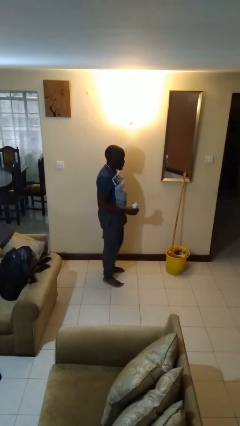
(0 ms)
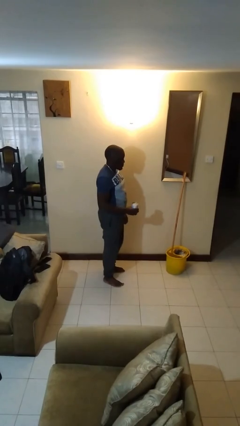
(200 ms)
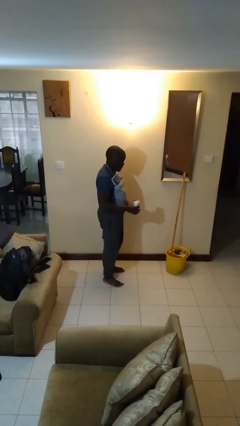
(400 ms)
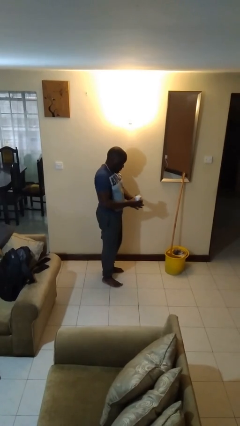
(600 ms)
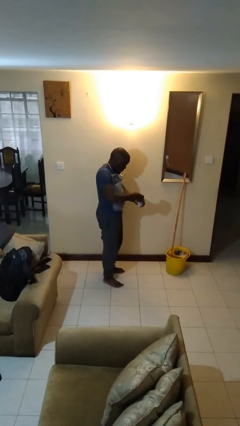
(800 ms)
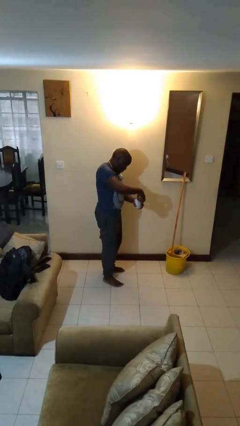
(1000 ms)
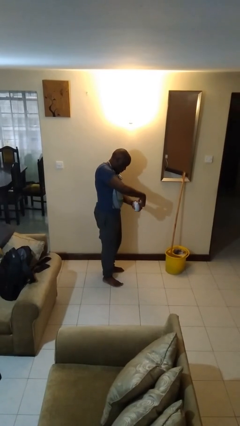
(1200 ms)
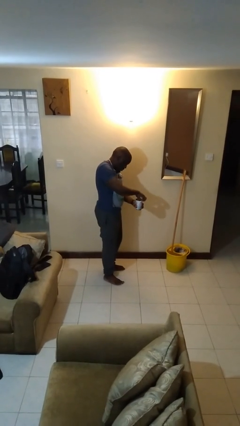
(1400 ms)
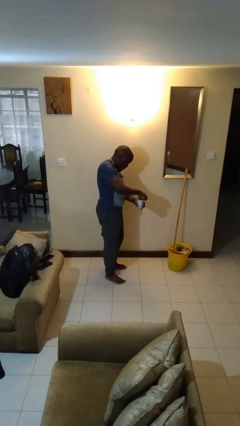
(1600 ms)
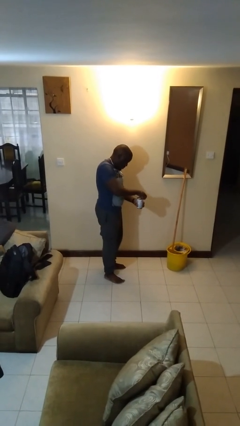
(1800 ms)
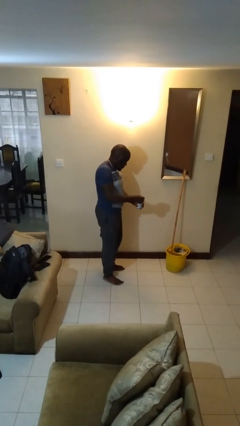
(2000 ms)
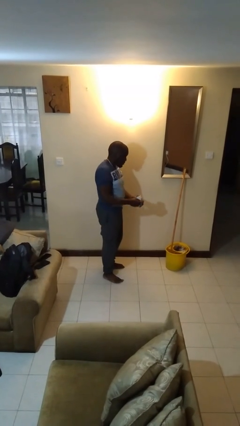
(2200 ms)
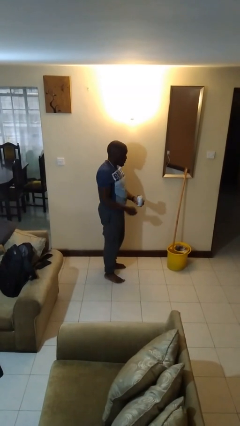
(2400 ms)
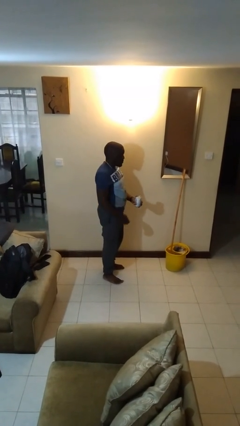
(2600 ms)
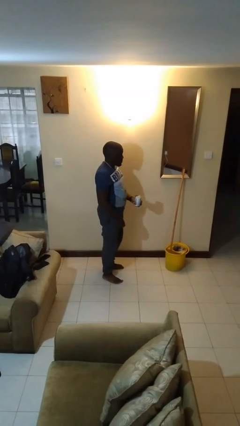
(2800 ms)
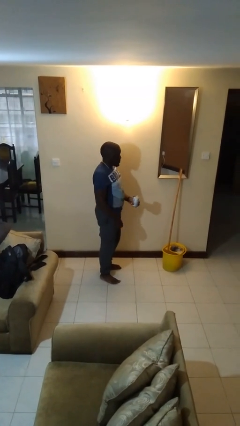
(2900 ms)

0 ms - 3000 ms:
person opens beverage can

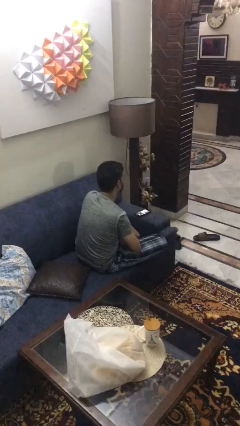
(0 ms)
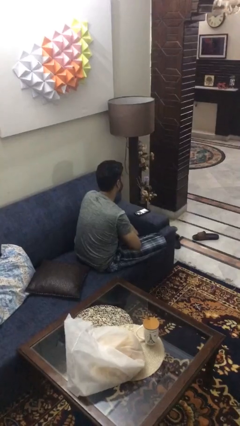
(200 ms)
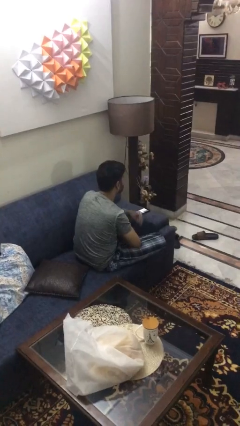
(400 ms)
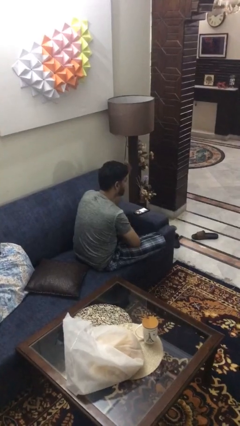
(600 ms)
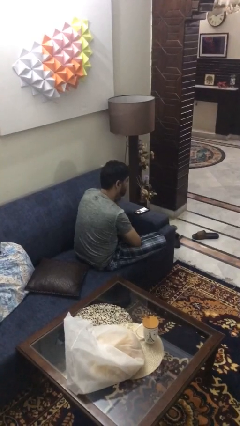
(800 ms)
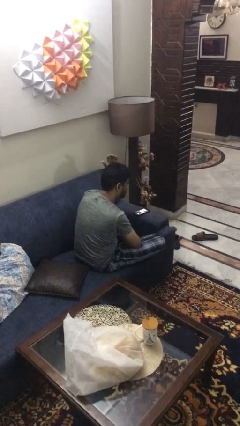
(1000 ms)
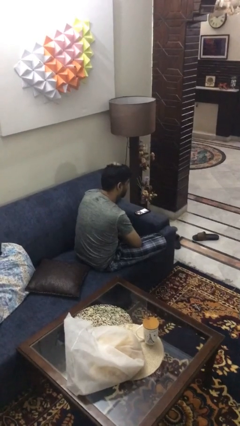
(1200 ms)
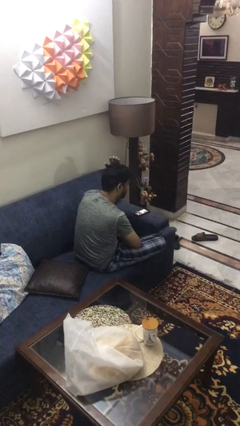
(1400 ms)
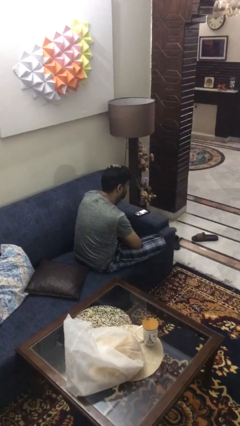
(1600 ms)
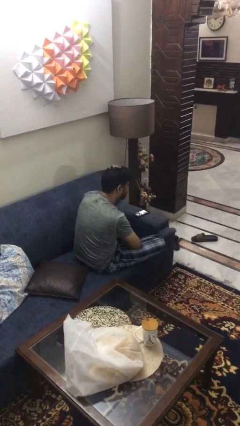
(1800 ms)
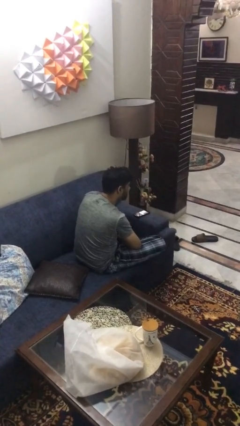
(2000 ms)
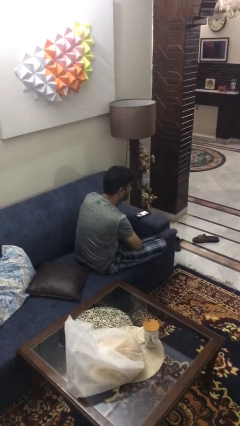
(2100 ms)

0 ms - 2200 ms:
person strokes hair

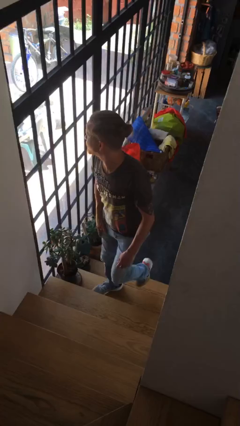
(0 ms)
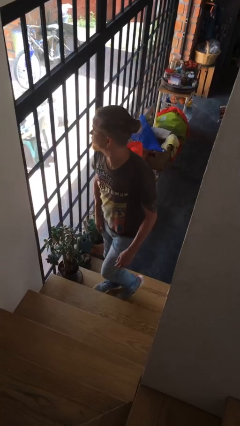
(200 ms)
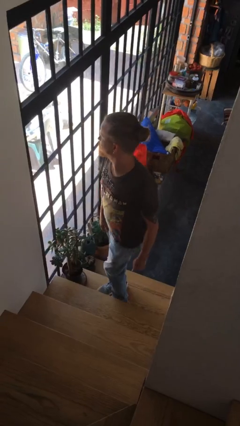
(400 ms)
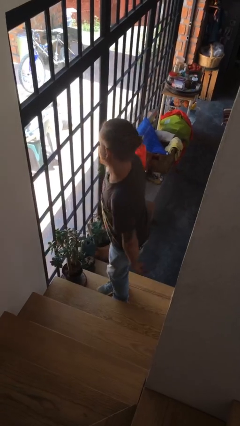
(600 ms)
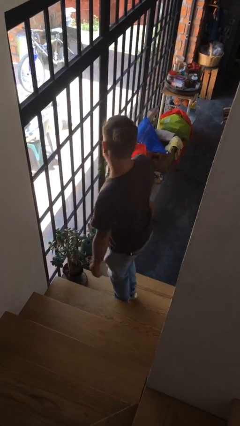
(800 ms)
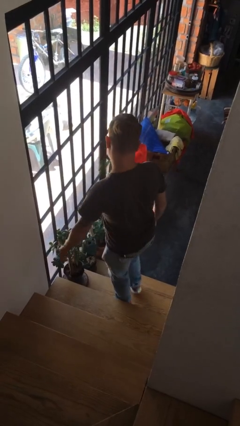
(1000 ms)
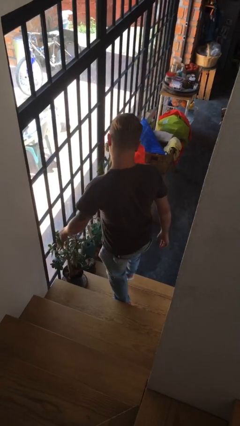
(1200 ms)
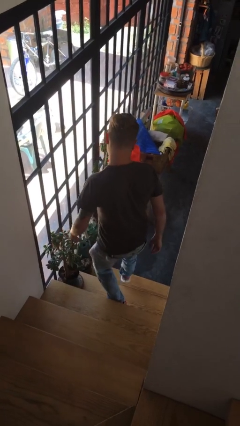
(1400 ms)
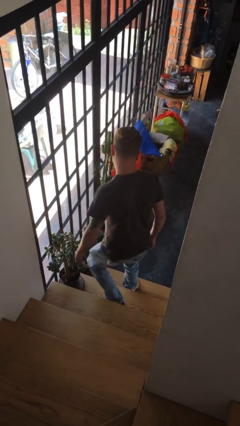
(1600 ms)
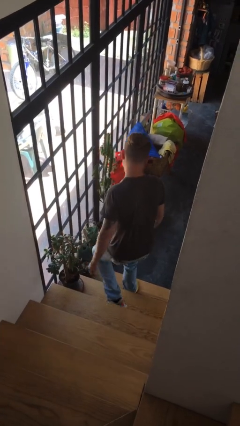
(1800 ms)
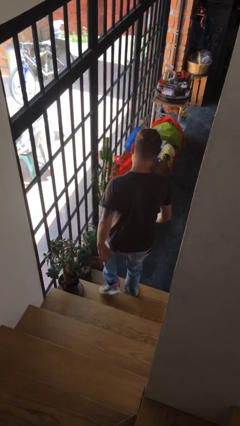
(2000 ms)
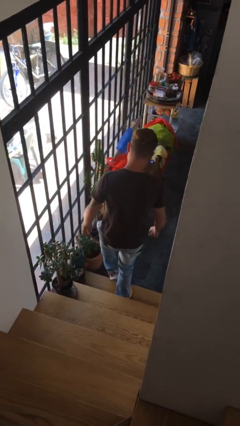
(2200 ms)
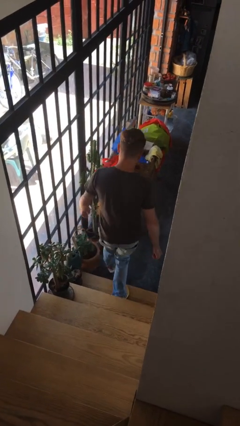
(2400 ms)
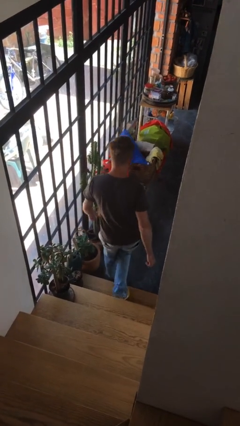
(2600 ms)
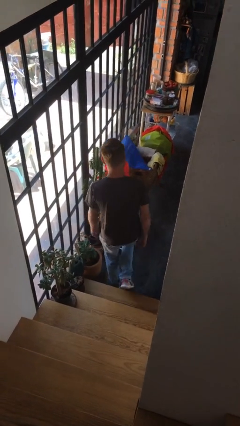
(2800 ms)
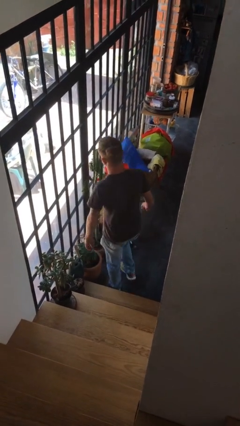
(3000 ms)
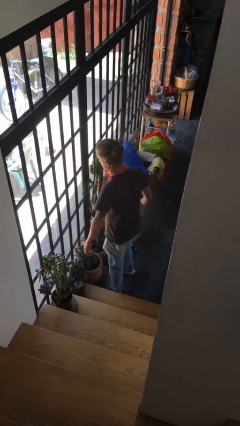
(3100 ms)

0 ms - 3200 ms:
person climbs down stairs

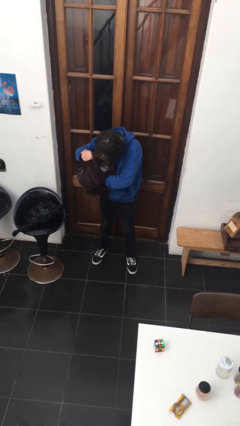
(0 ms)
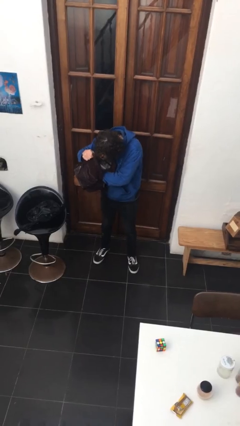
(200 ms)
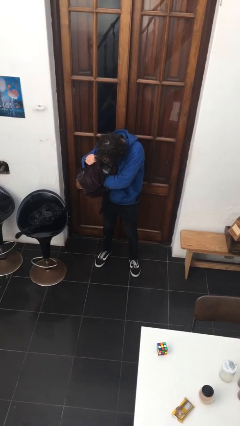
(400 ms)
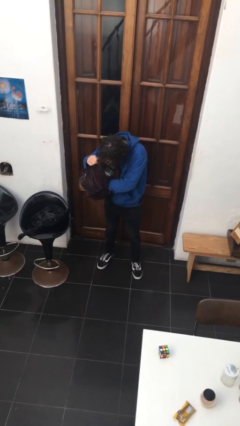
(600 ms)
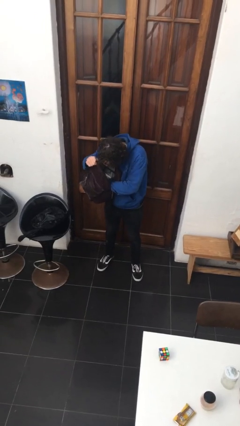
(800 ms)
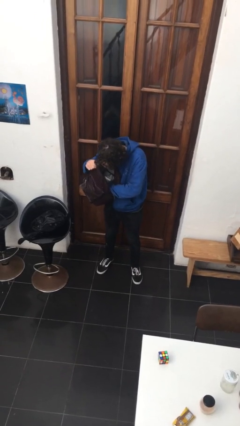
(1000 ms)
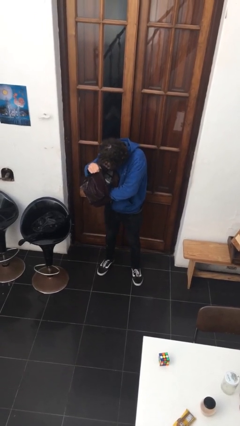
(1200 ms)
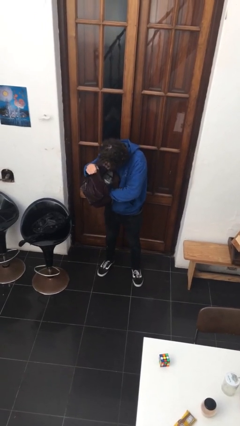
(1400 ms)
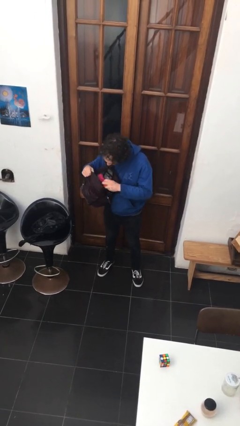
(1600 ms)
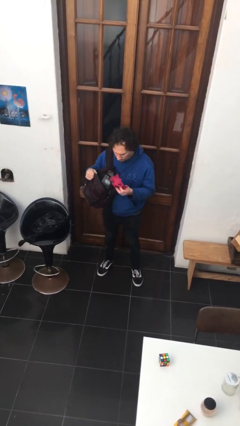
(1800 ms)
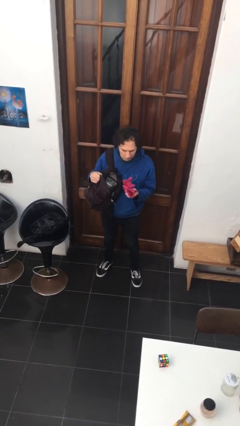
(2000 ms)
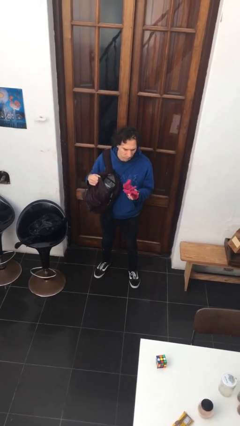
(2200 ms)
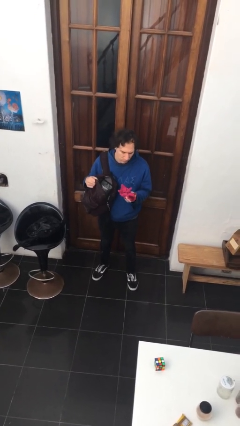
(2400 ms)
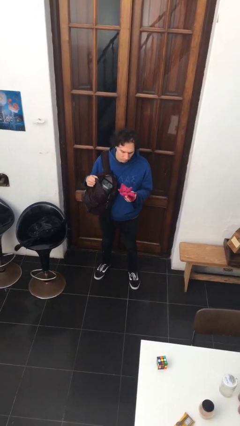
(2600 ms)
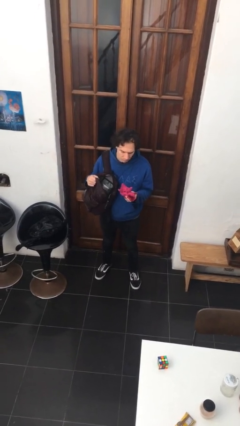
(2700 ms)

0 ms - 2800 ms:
person takes object from backpack

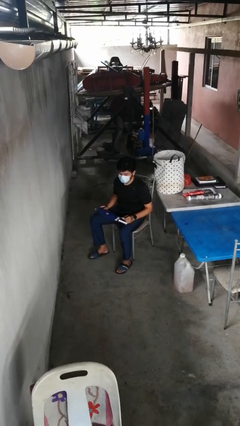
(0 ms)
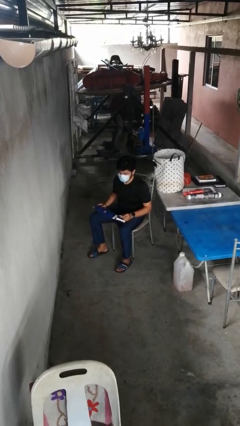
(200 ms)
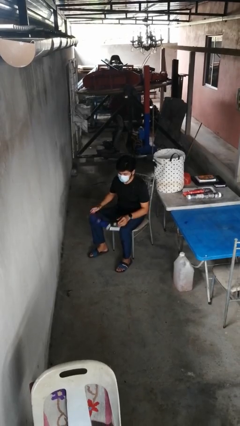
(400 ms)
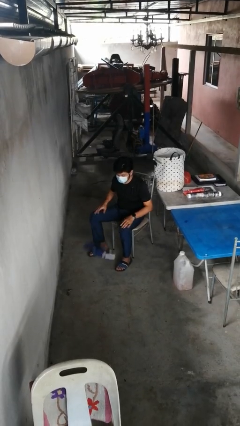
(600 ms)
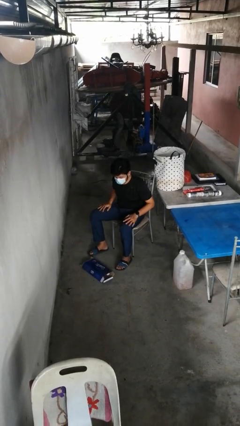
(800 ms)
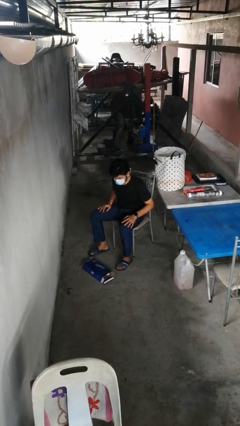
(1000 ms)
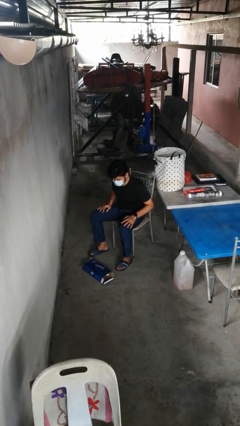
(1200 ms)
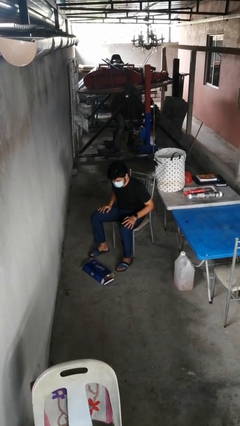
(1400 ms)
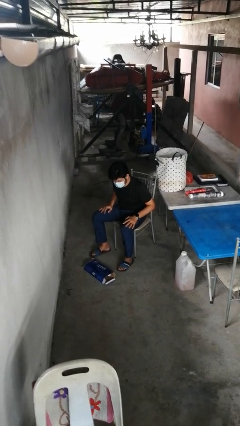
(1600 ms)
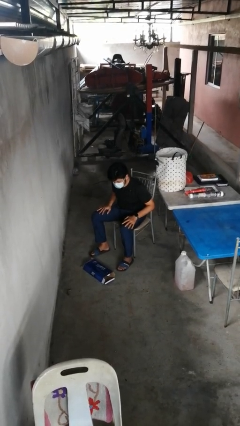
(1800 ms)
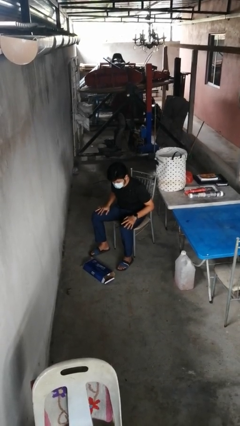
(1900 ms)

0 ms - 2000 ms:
person drops object

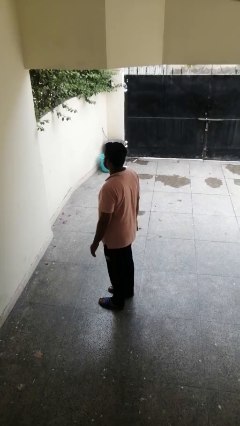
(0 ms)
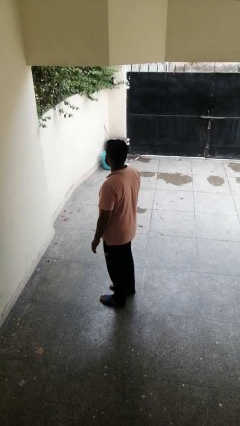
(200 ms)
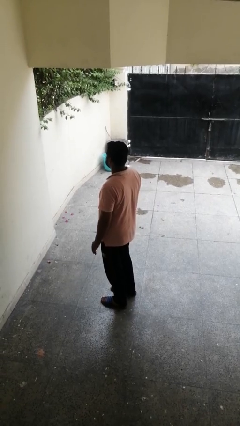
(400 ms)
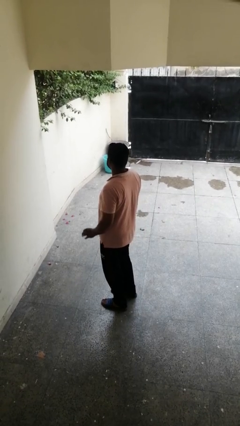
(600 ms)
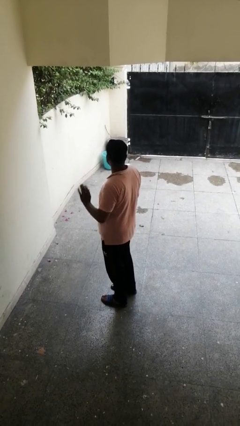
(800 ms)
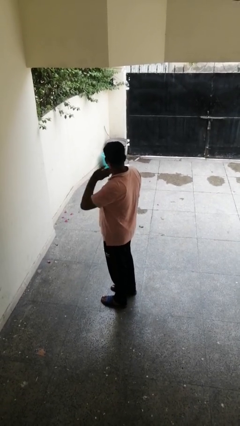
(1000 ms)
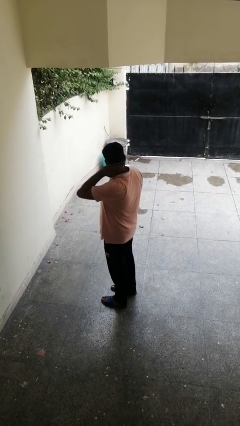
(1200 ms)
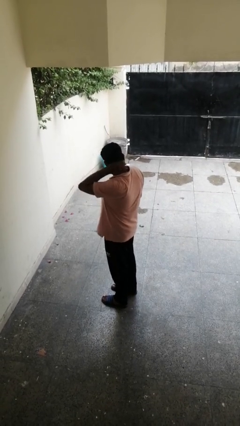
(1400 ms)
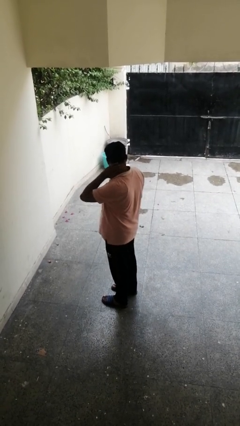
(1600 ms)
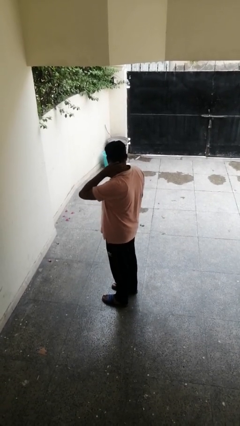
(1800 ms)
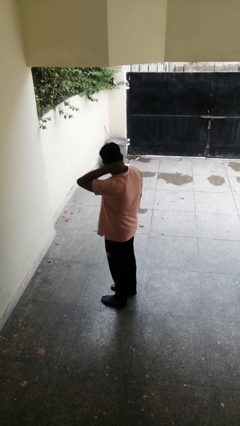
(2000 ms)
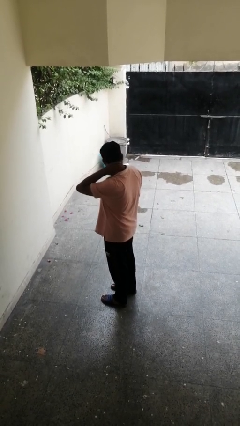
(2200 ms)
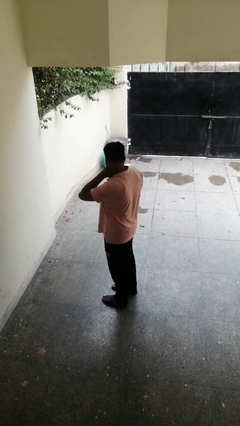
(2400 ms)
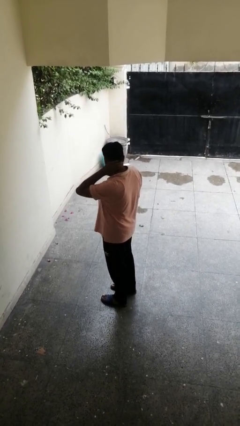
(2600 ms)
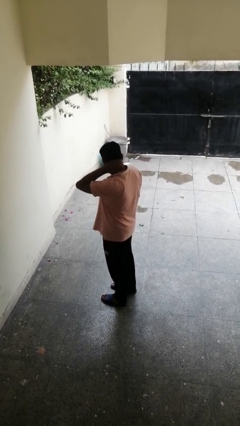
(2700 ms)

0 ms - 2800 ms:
person rubs neck

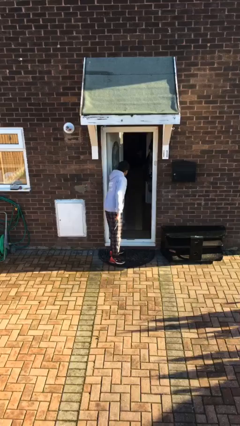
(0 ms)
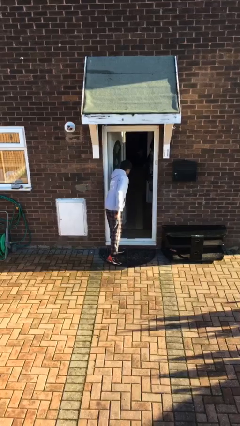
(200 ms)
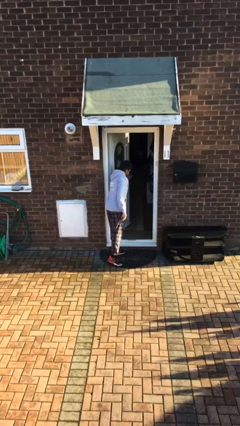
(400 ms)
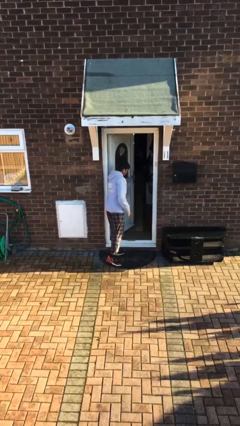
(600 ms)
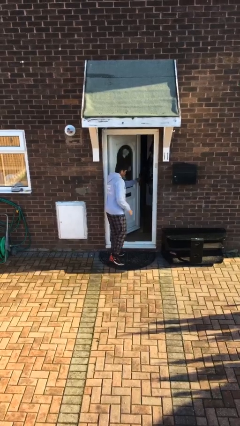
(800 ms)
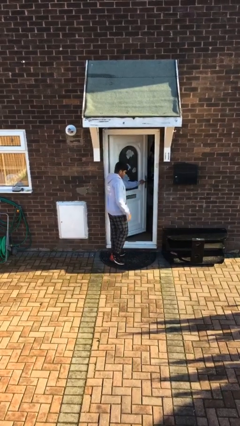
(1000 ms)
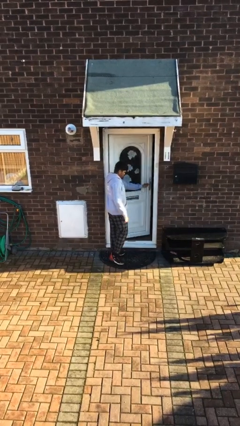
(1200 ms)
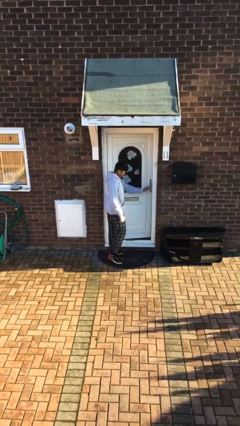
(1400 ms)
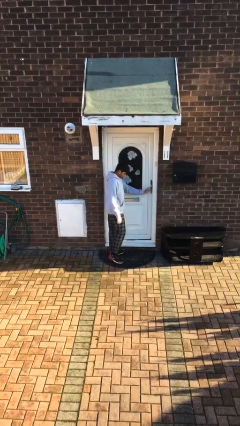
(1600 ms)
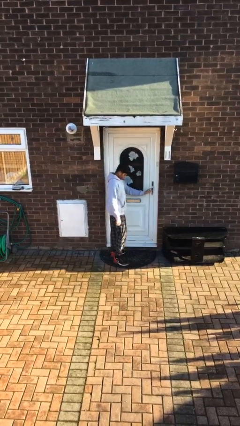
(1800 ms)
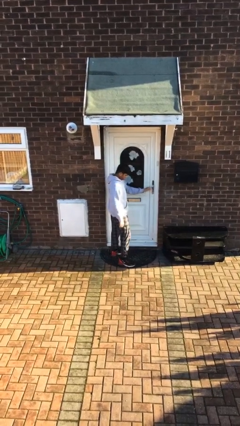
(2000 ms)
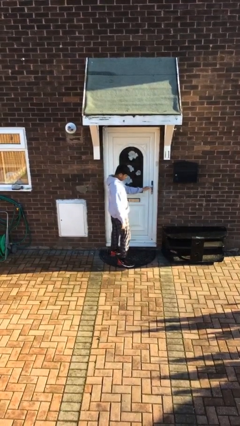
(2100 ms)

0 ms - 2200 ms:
person closes facility door
